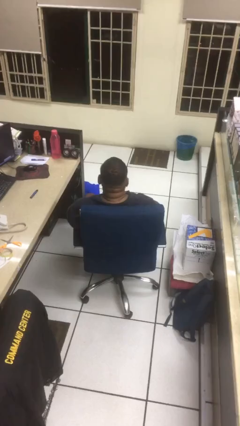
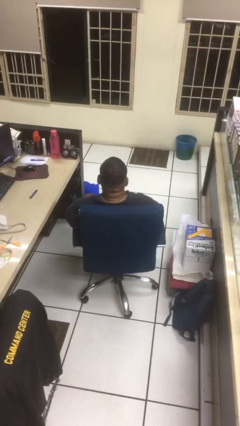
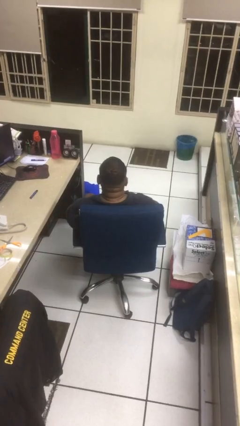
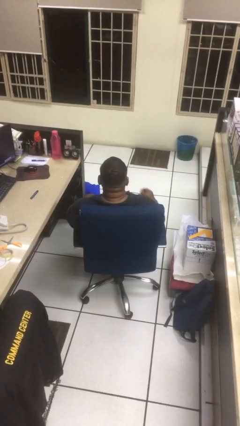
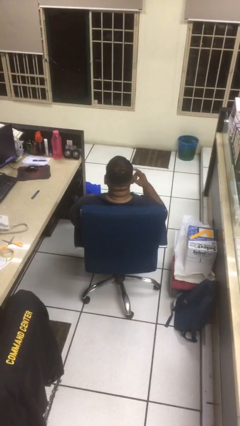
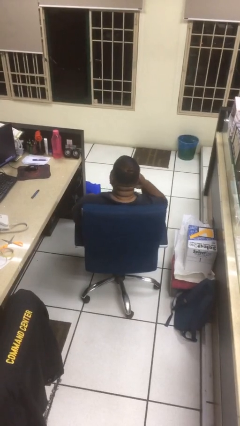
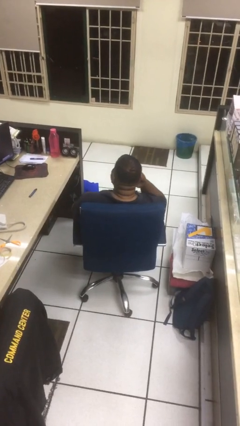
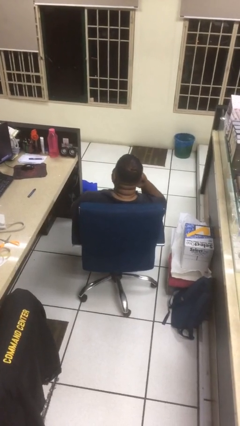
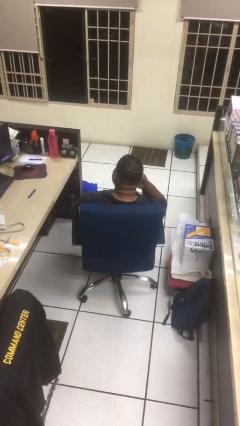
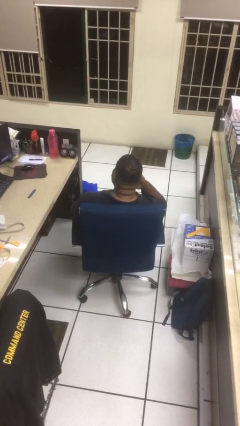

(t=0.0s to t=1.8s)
person gestures listen closely

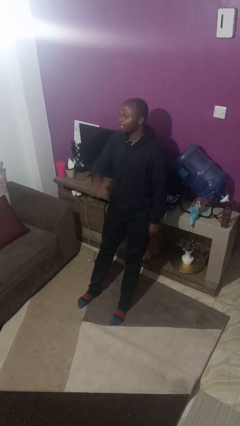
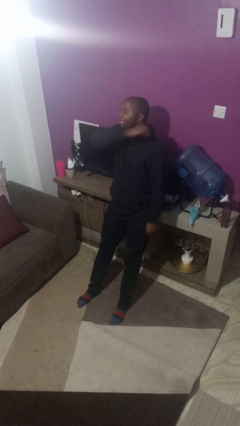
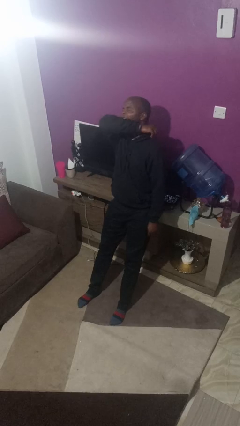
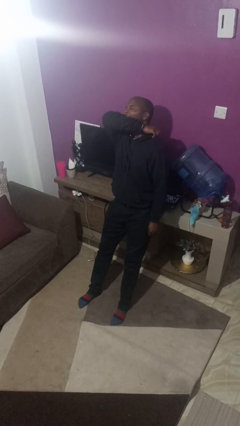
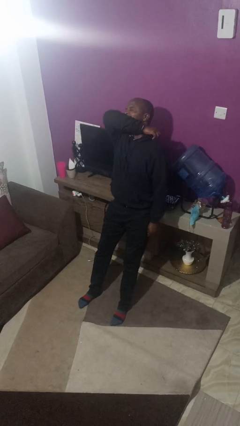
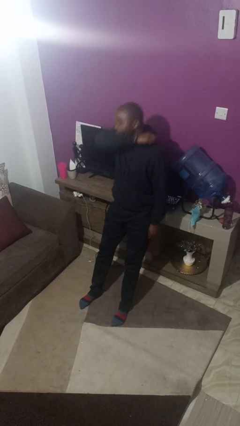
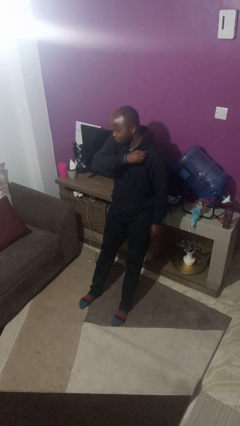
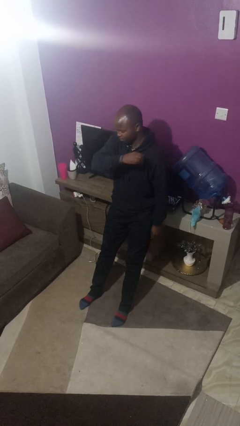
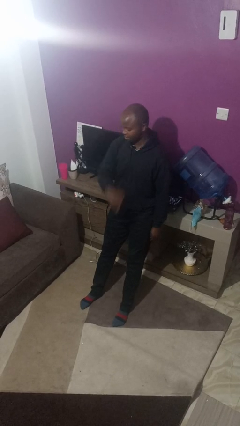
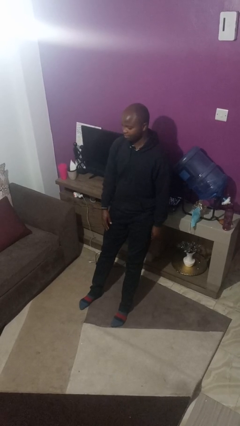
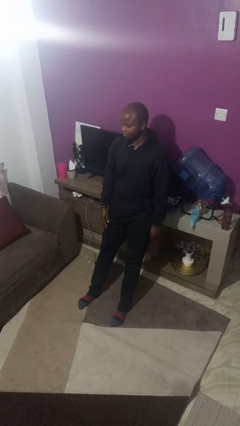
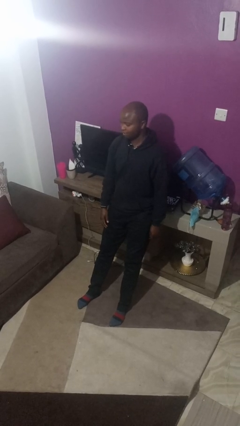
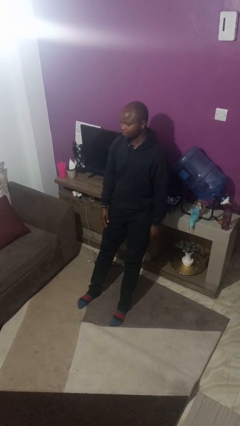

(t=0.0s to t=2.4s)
person sneezes into hand

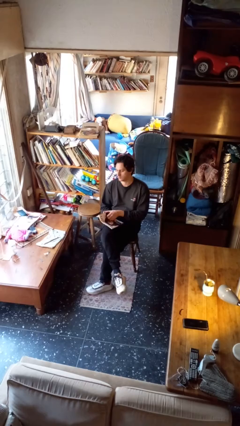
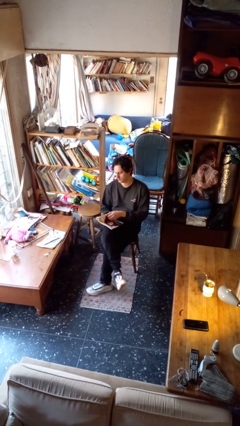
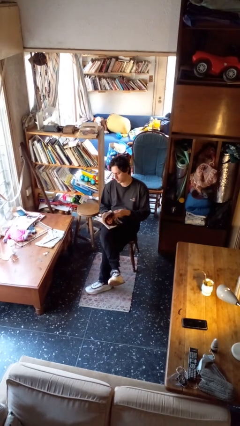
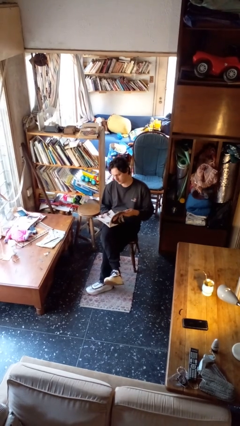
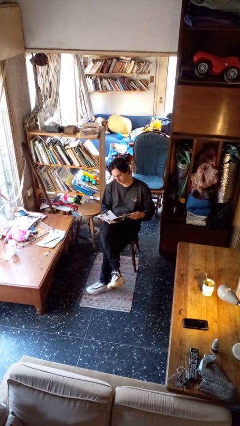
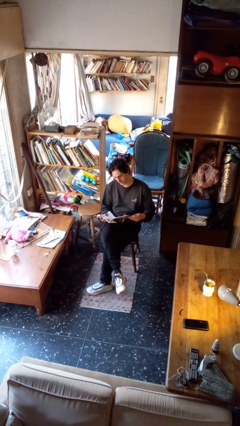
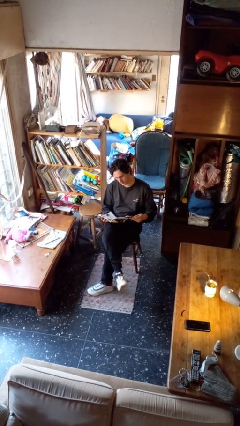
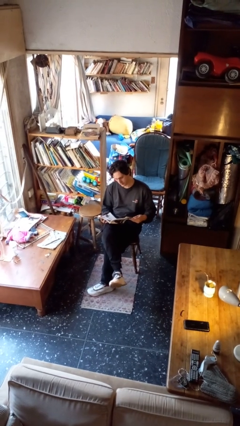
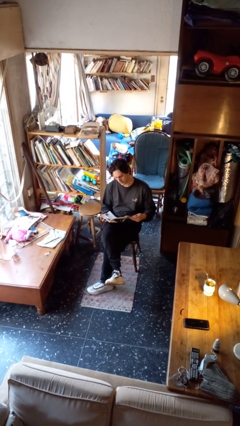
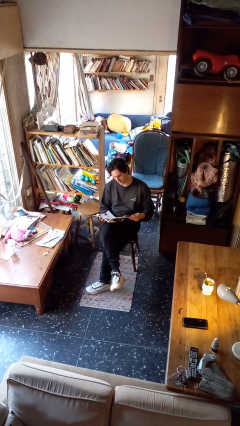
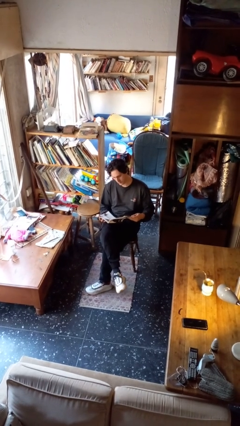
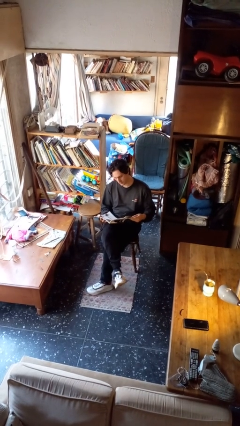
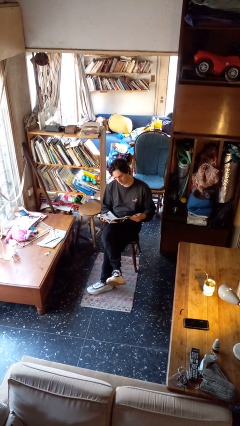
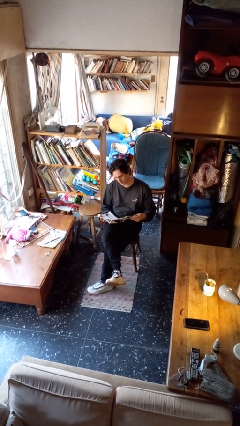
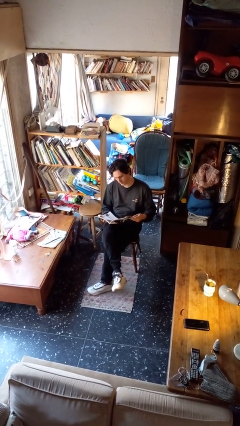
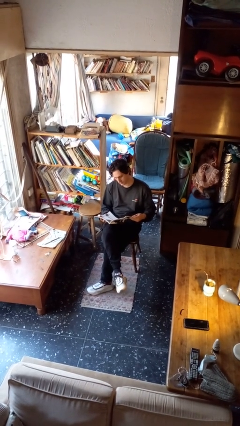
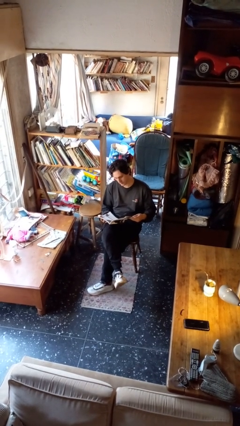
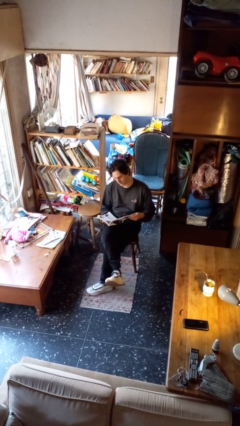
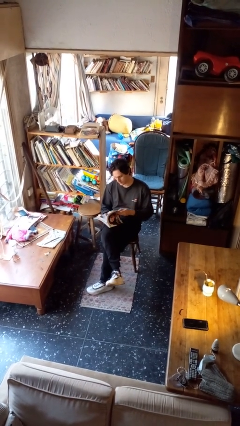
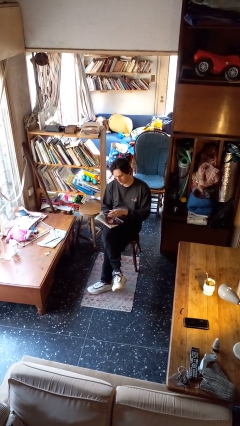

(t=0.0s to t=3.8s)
person reads magazine

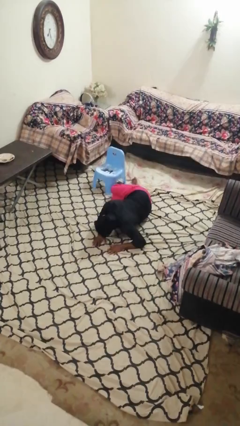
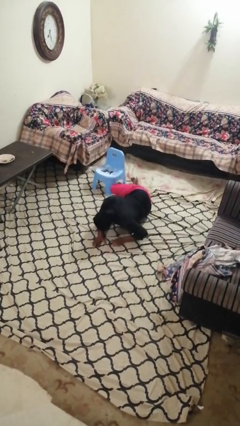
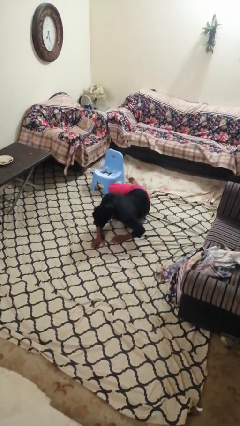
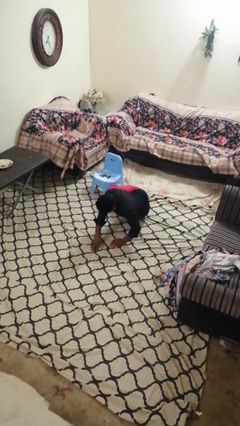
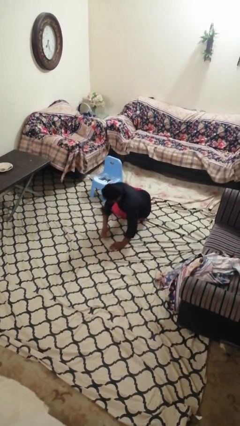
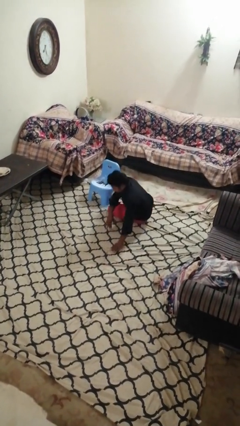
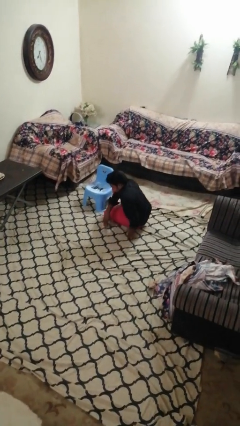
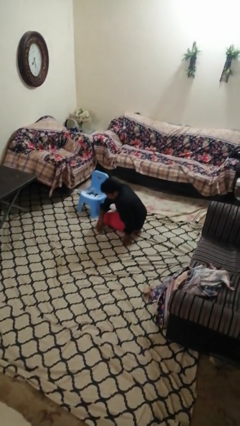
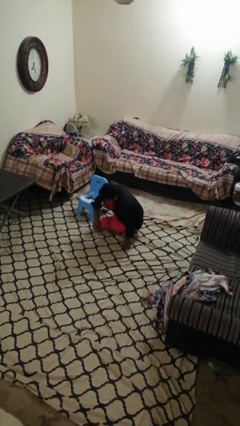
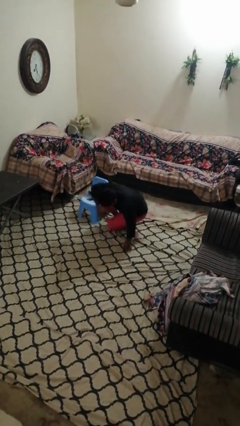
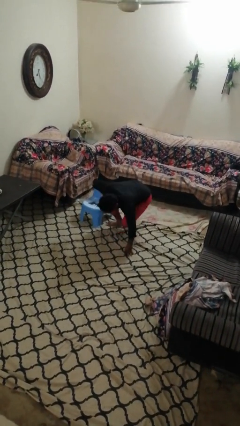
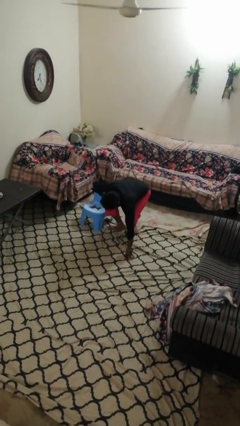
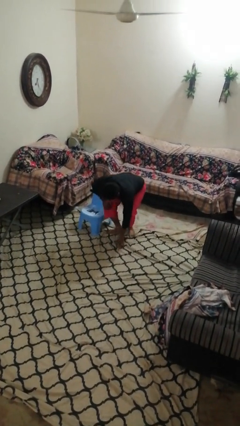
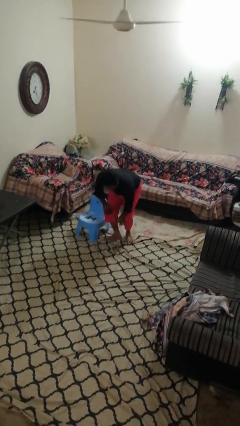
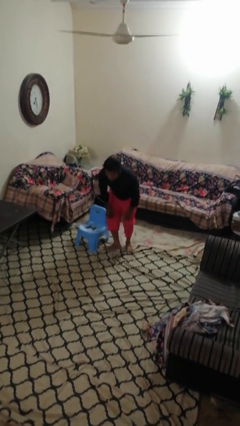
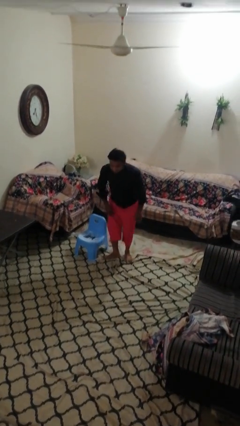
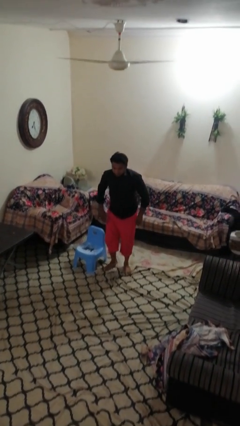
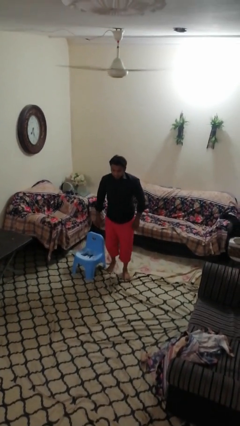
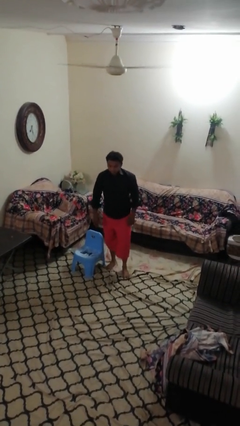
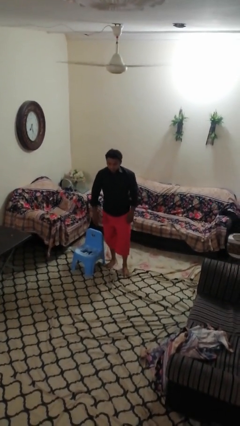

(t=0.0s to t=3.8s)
person stands up from floor

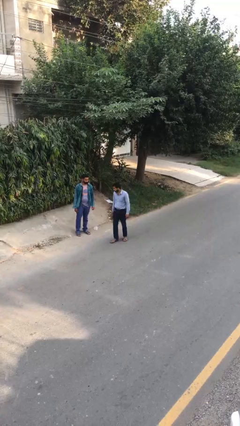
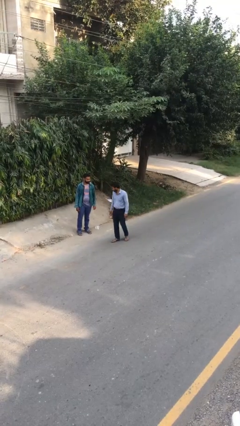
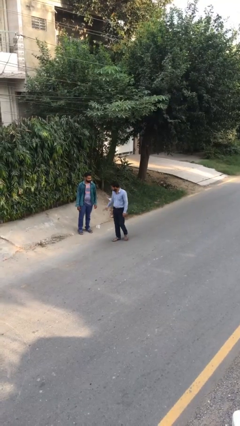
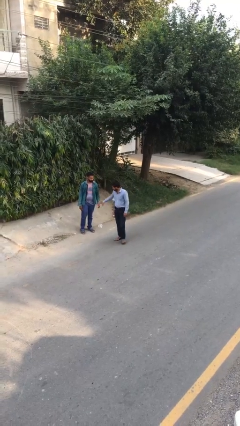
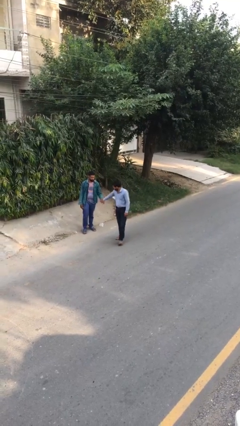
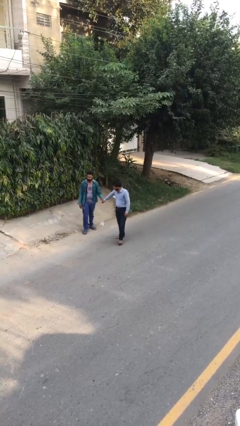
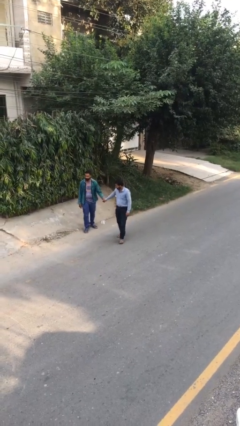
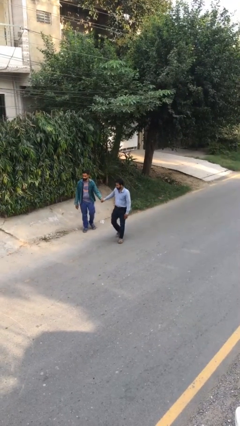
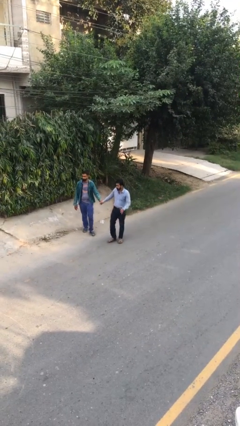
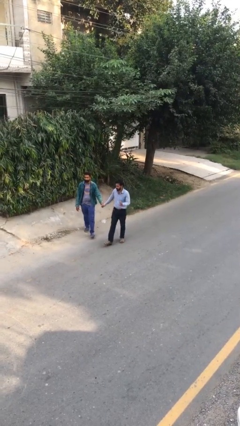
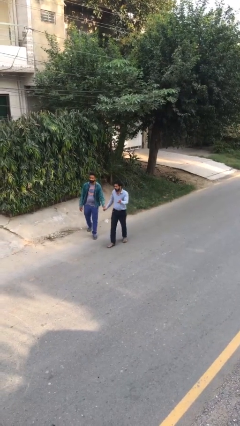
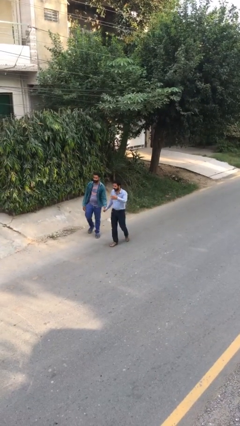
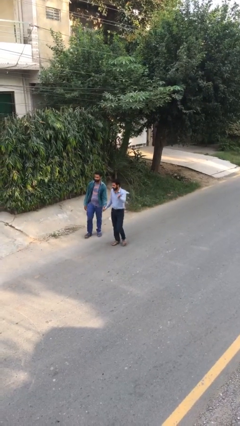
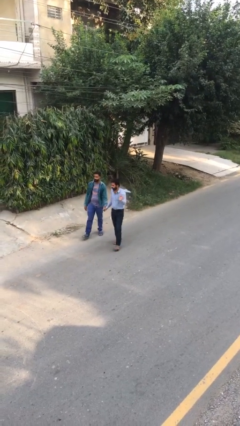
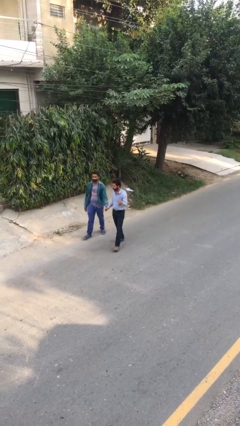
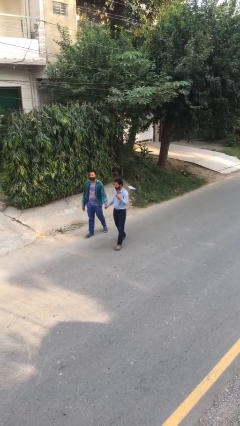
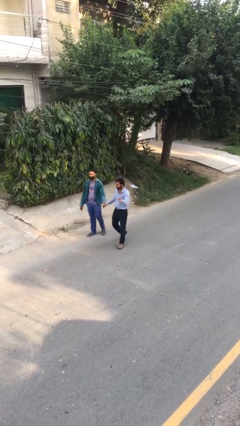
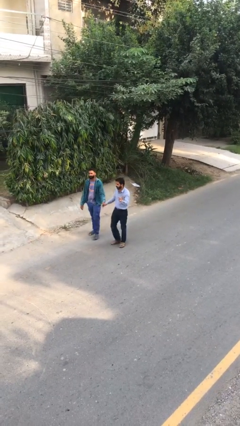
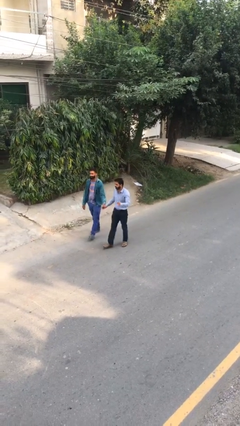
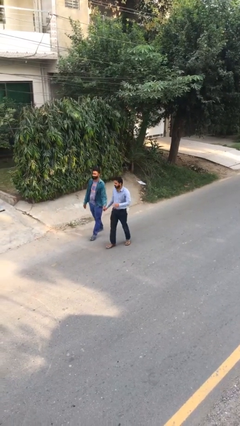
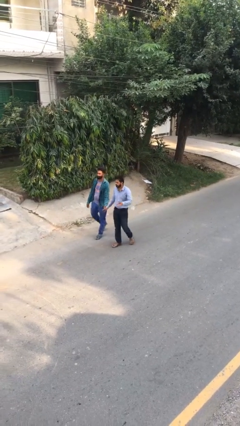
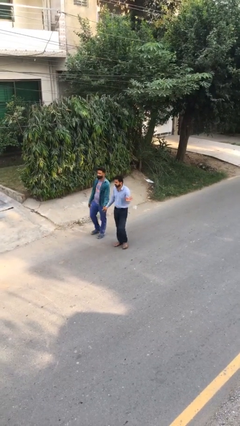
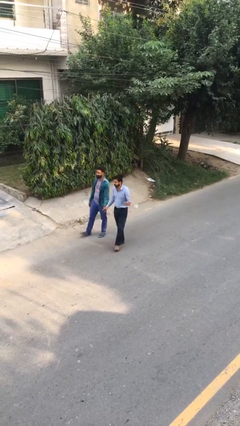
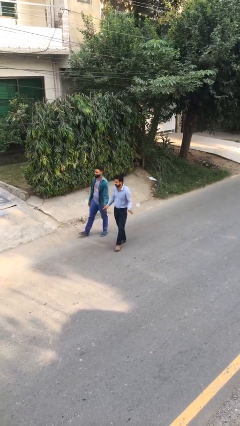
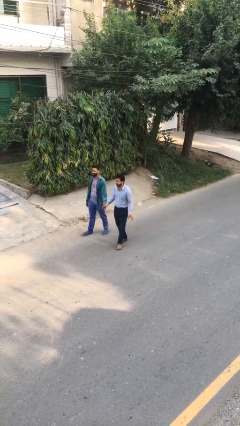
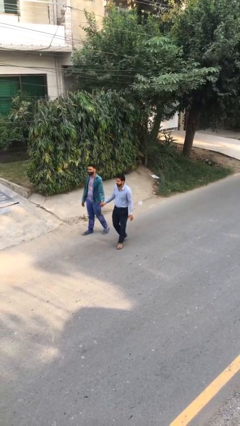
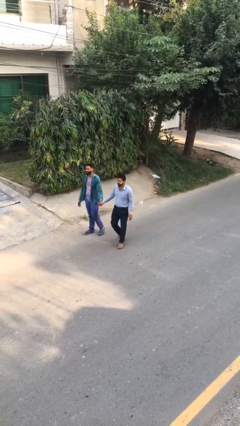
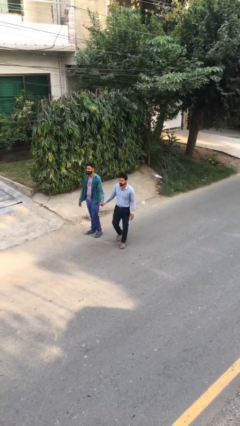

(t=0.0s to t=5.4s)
person holds hand

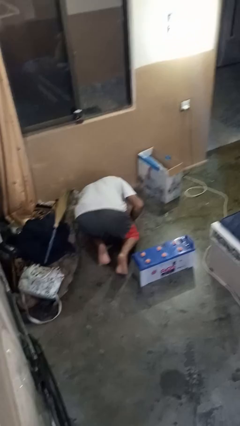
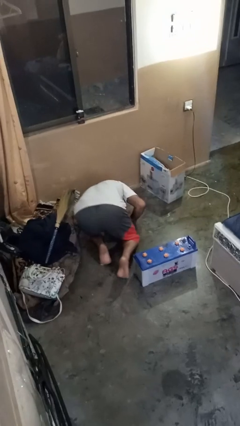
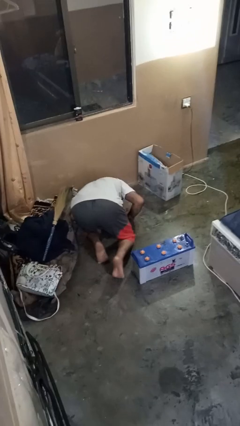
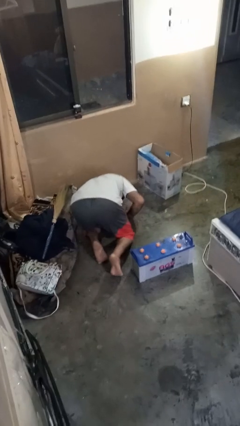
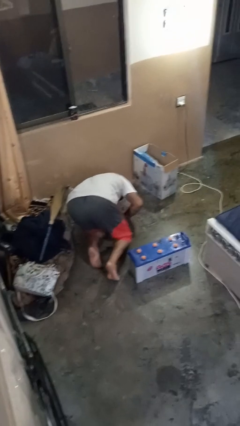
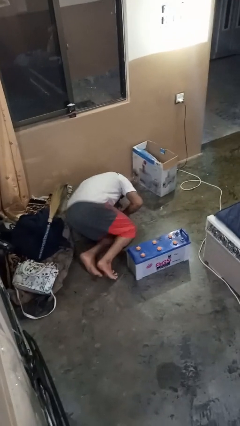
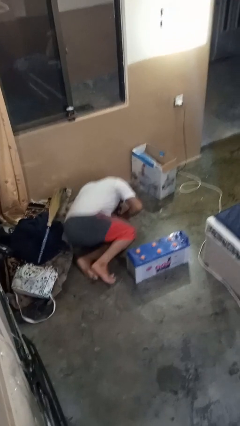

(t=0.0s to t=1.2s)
person lies down on floor
